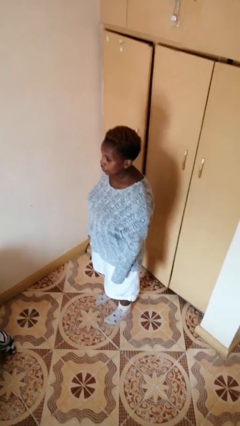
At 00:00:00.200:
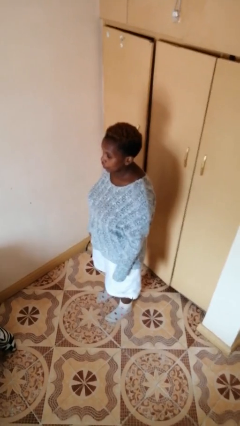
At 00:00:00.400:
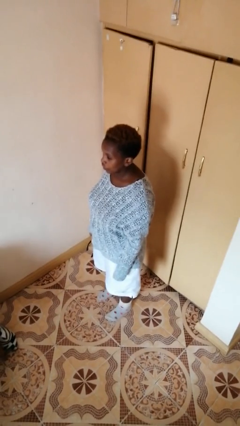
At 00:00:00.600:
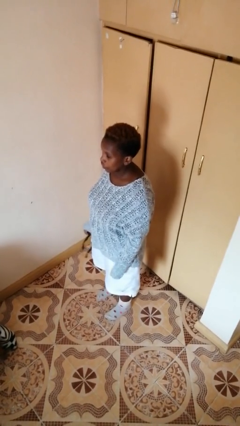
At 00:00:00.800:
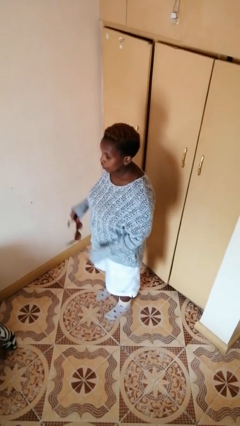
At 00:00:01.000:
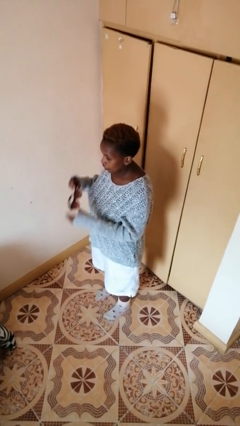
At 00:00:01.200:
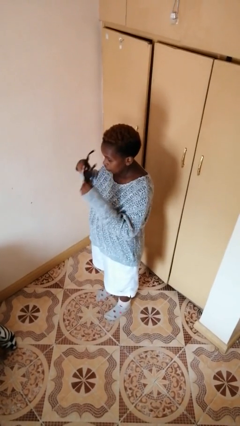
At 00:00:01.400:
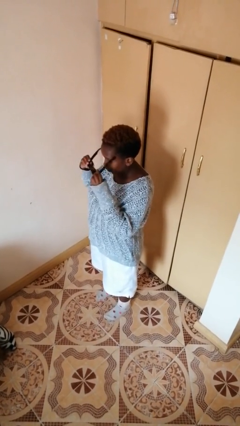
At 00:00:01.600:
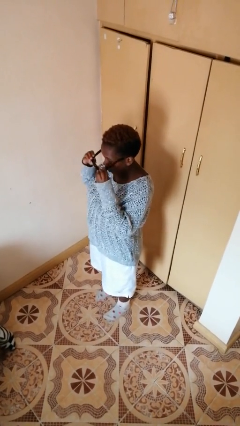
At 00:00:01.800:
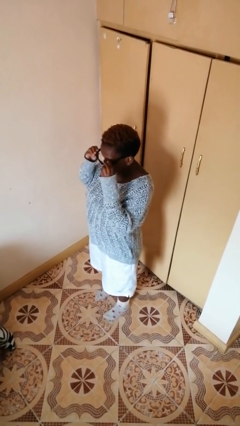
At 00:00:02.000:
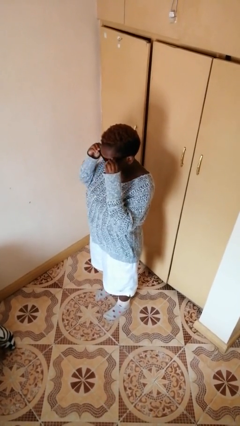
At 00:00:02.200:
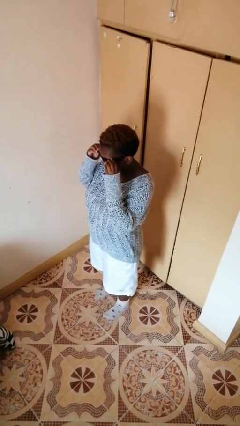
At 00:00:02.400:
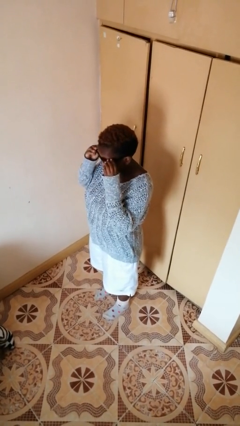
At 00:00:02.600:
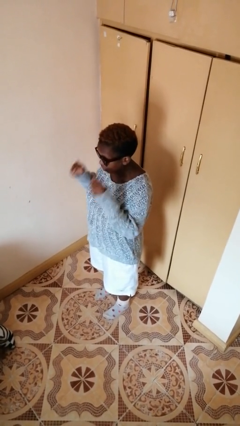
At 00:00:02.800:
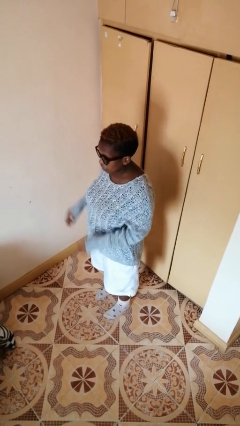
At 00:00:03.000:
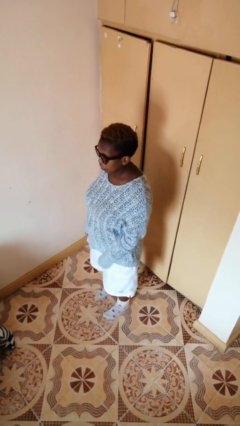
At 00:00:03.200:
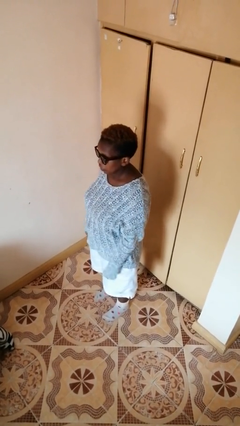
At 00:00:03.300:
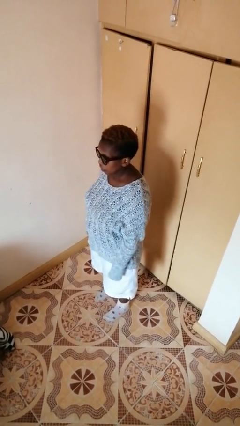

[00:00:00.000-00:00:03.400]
person puts on sunglasses

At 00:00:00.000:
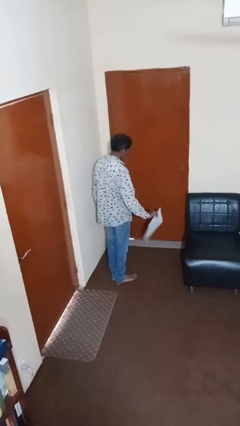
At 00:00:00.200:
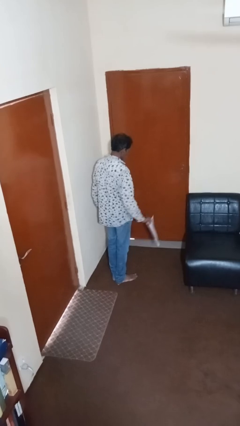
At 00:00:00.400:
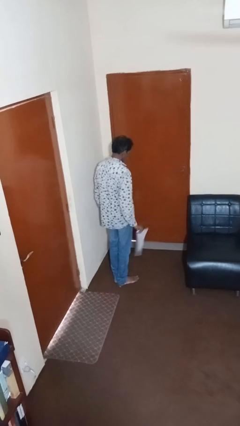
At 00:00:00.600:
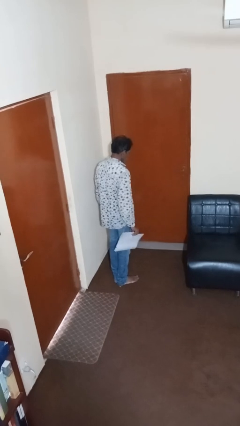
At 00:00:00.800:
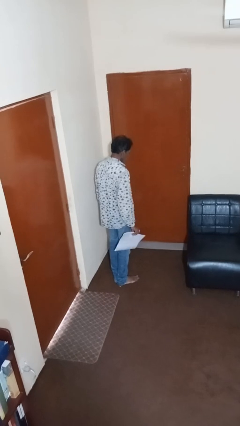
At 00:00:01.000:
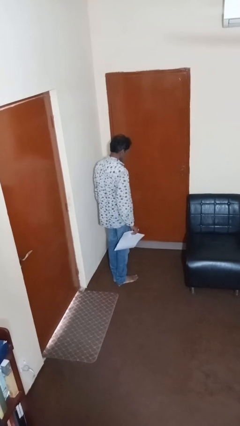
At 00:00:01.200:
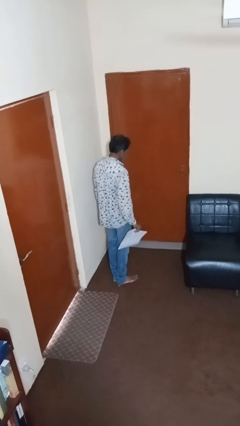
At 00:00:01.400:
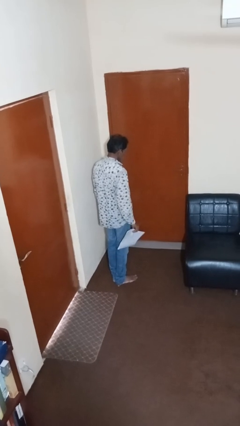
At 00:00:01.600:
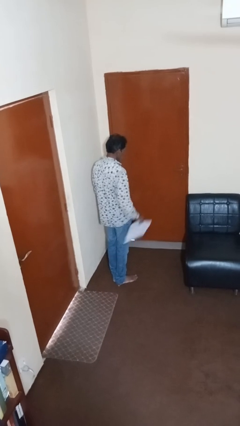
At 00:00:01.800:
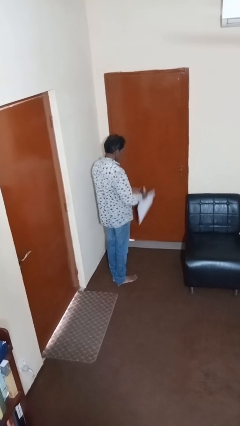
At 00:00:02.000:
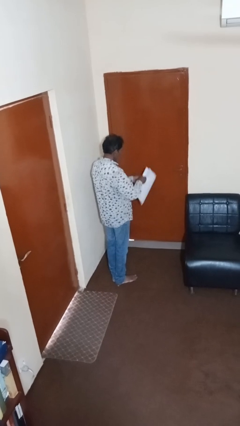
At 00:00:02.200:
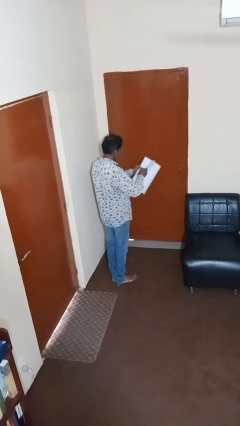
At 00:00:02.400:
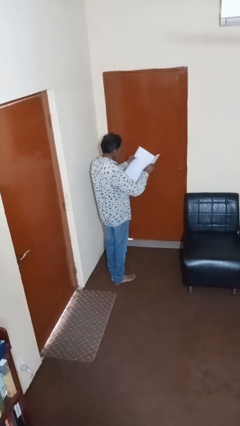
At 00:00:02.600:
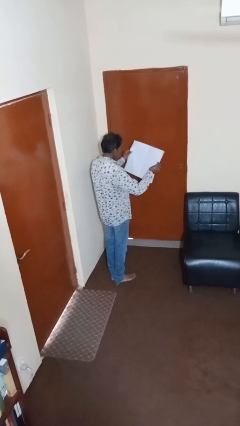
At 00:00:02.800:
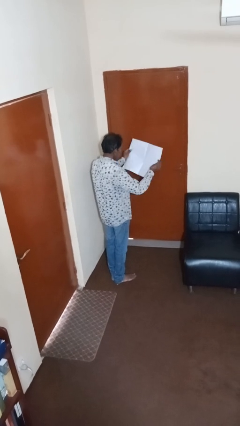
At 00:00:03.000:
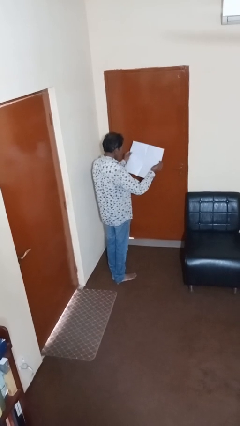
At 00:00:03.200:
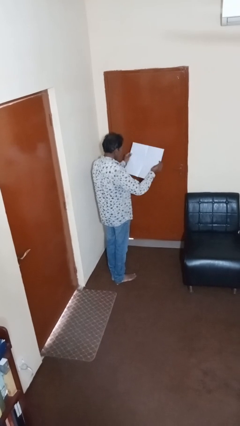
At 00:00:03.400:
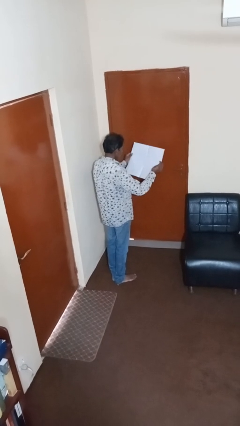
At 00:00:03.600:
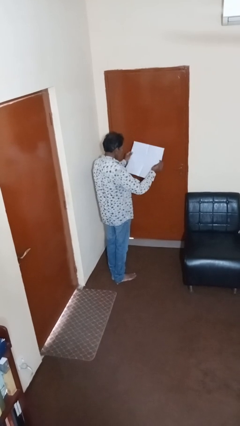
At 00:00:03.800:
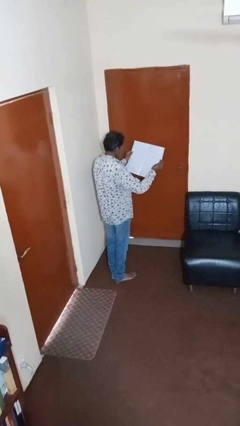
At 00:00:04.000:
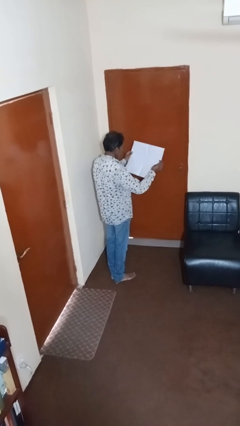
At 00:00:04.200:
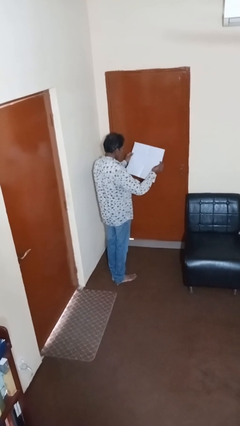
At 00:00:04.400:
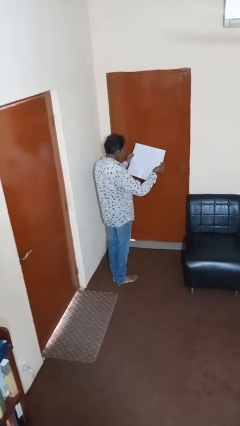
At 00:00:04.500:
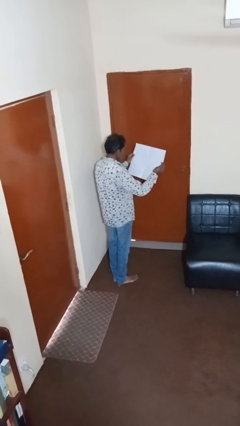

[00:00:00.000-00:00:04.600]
person reads newspaper

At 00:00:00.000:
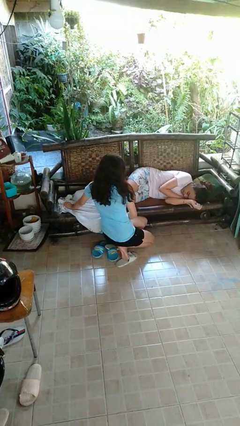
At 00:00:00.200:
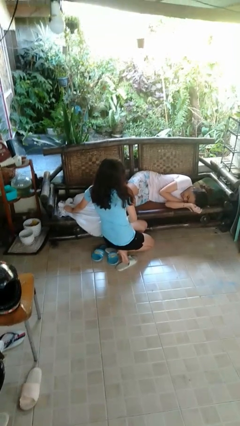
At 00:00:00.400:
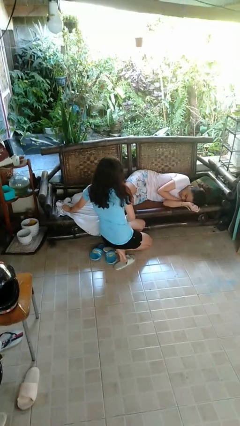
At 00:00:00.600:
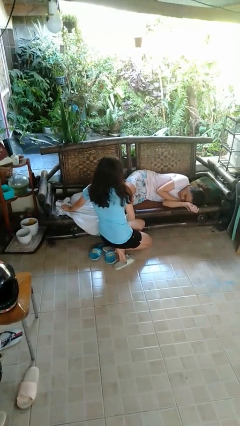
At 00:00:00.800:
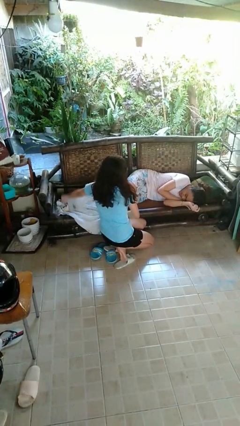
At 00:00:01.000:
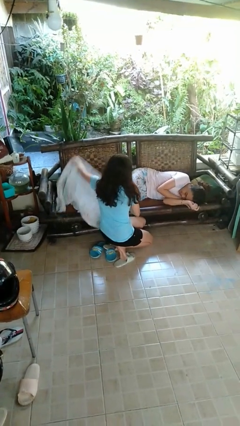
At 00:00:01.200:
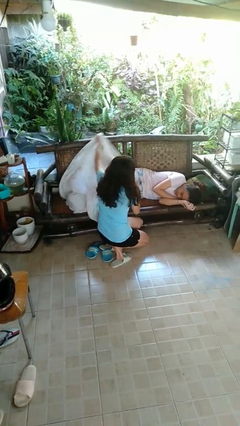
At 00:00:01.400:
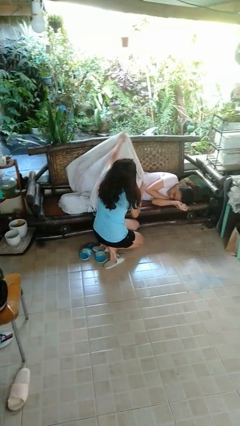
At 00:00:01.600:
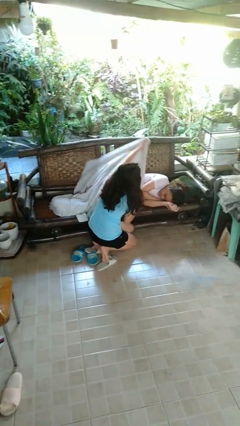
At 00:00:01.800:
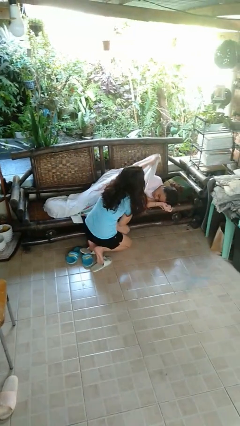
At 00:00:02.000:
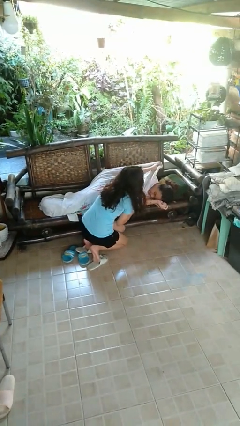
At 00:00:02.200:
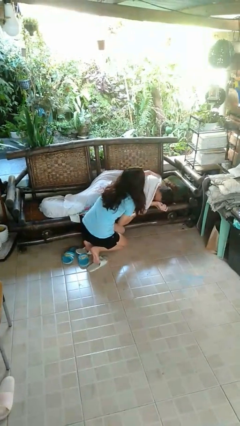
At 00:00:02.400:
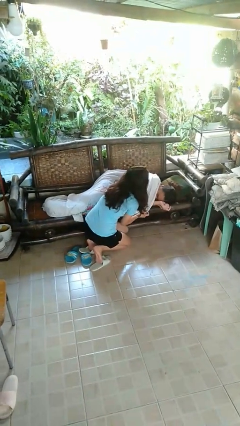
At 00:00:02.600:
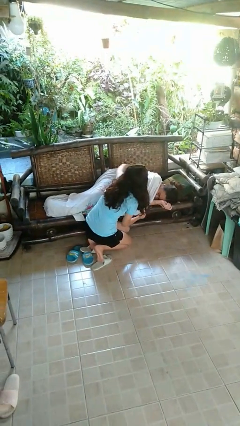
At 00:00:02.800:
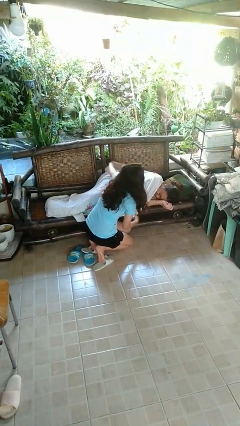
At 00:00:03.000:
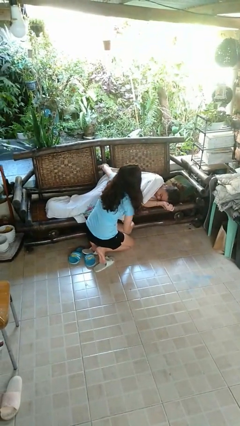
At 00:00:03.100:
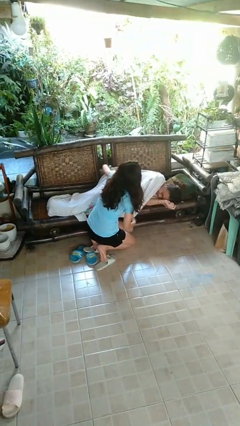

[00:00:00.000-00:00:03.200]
person covers friend with blanket

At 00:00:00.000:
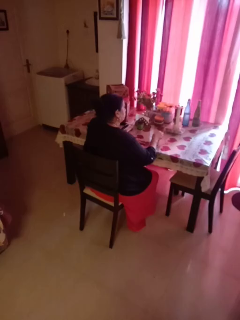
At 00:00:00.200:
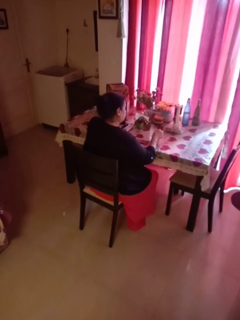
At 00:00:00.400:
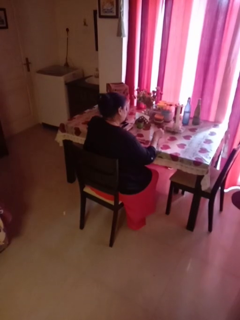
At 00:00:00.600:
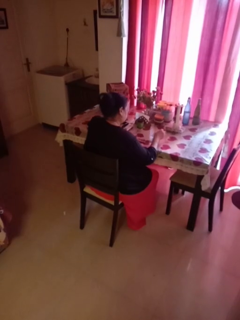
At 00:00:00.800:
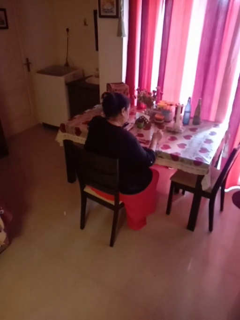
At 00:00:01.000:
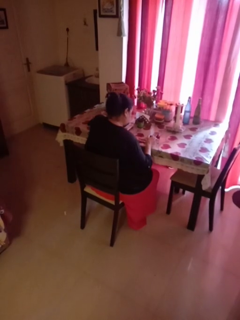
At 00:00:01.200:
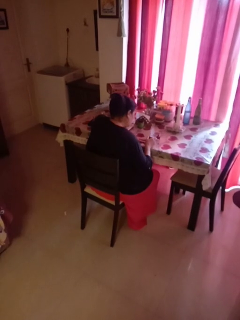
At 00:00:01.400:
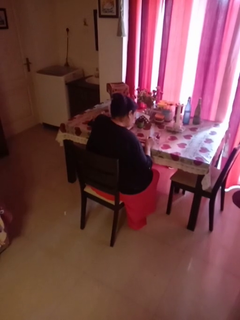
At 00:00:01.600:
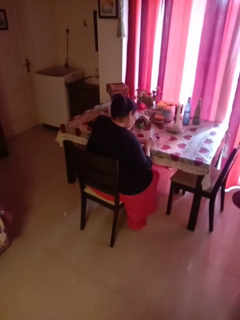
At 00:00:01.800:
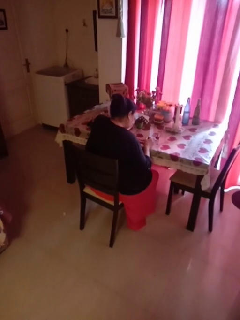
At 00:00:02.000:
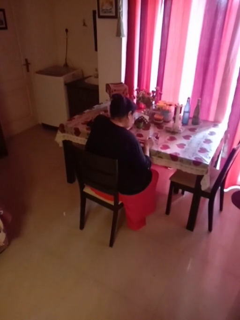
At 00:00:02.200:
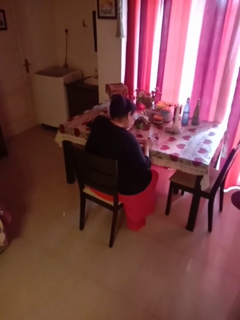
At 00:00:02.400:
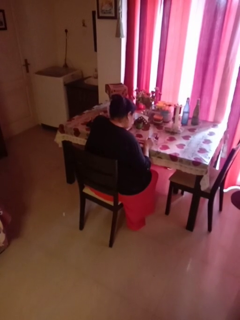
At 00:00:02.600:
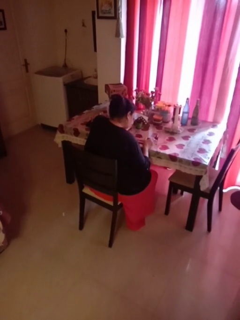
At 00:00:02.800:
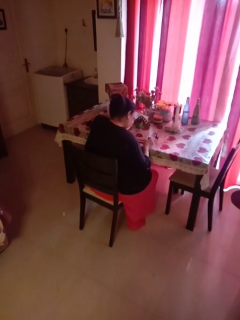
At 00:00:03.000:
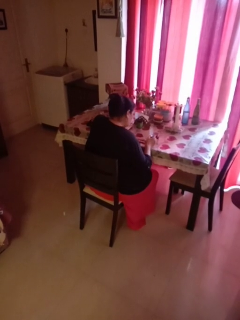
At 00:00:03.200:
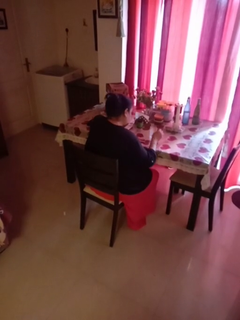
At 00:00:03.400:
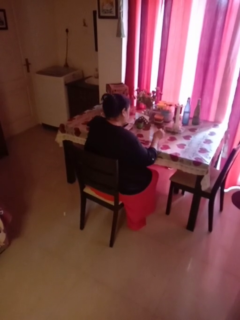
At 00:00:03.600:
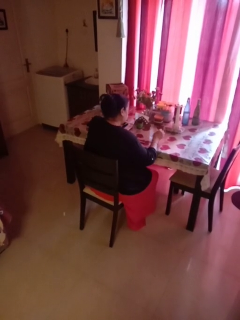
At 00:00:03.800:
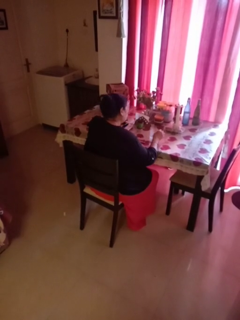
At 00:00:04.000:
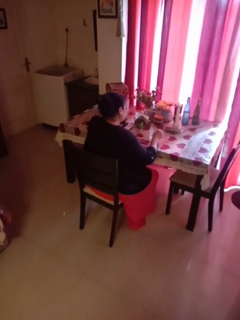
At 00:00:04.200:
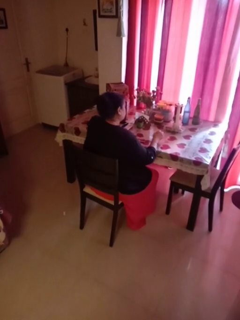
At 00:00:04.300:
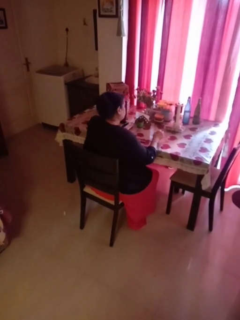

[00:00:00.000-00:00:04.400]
person paints fingernails

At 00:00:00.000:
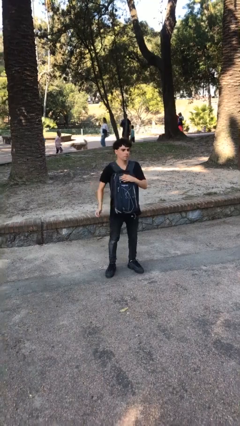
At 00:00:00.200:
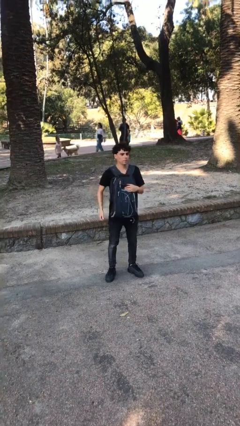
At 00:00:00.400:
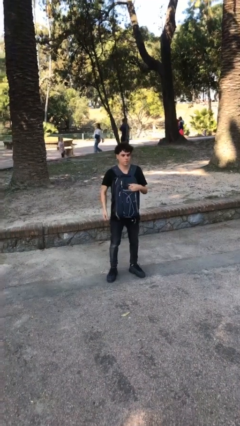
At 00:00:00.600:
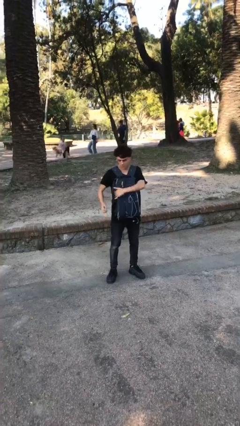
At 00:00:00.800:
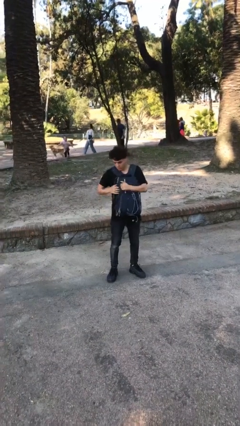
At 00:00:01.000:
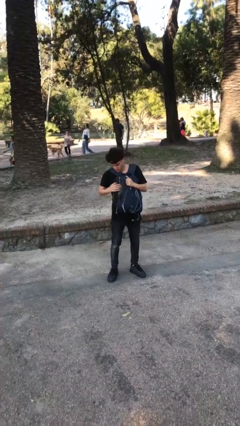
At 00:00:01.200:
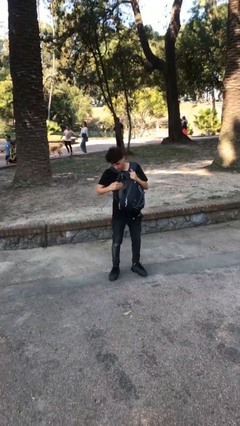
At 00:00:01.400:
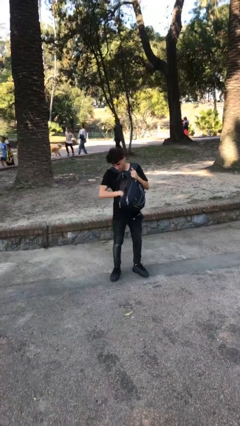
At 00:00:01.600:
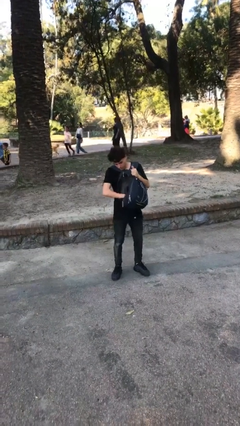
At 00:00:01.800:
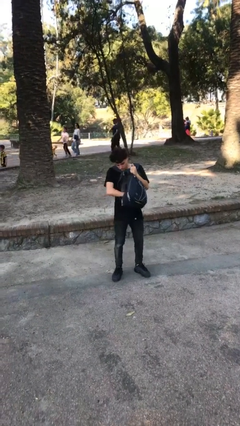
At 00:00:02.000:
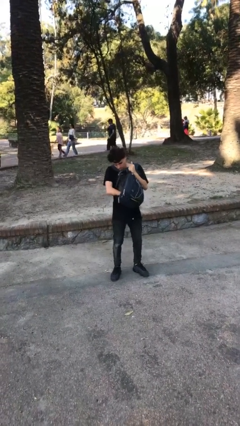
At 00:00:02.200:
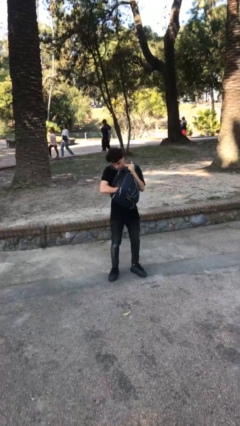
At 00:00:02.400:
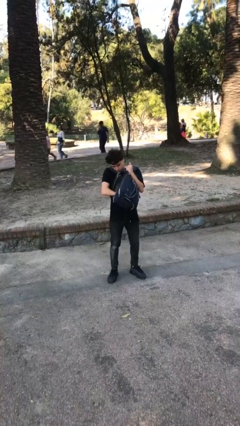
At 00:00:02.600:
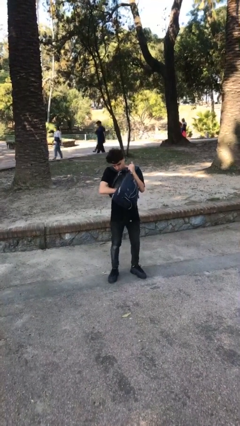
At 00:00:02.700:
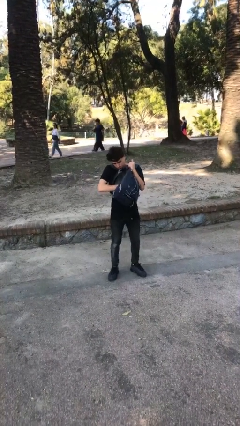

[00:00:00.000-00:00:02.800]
person searches in backpack
